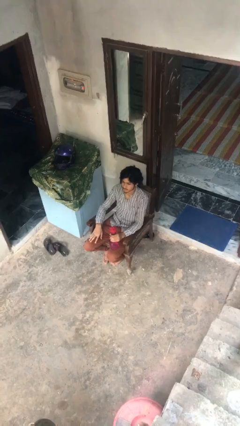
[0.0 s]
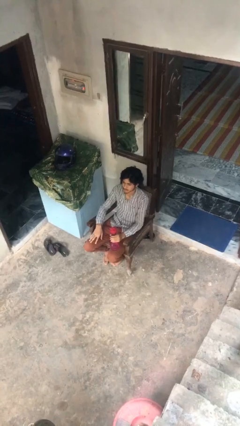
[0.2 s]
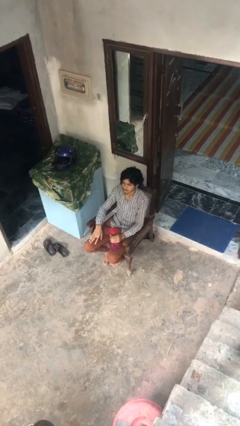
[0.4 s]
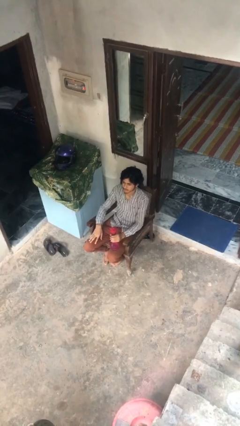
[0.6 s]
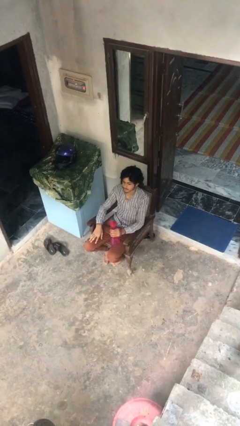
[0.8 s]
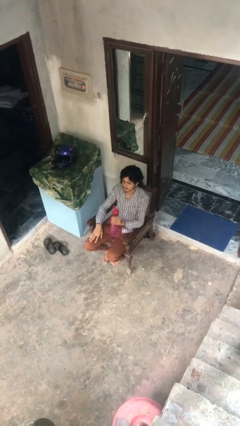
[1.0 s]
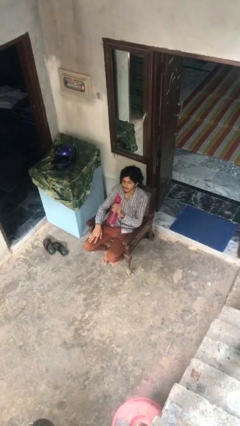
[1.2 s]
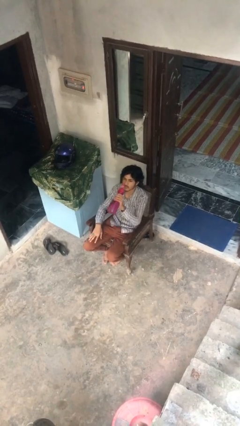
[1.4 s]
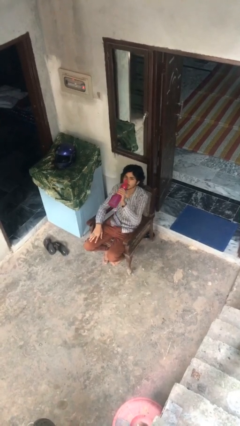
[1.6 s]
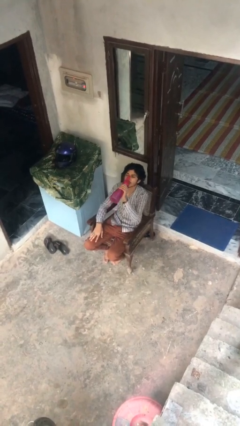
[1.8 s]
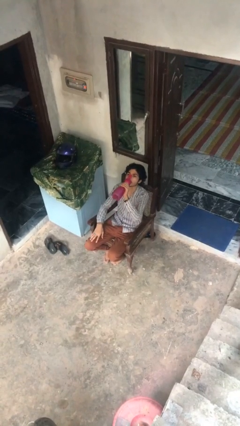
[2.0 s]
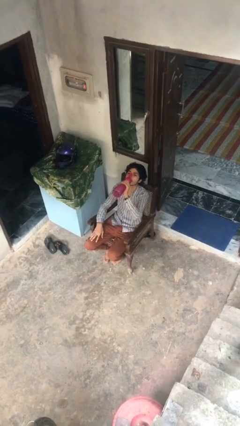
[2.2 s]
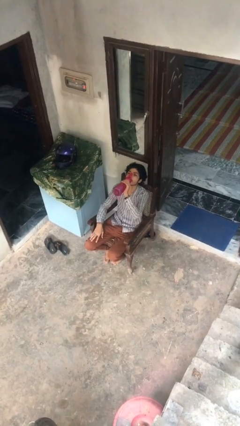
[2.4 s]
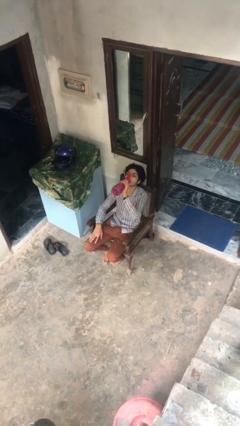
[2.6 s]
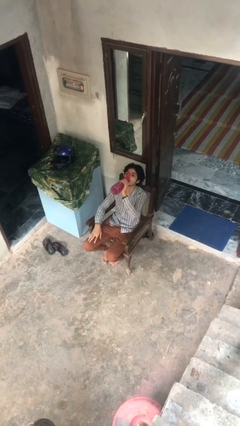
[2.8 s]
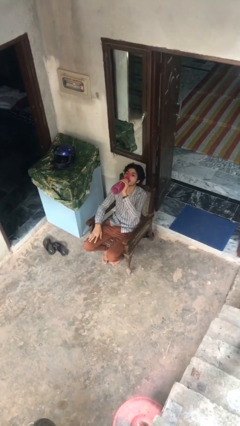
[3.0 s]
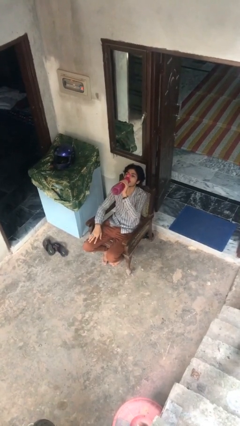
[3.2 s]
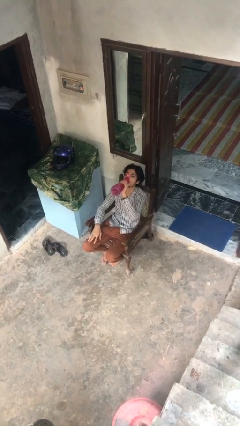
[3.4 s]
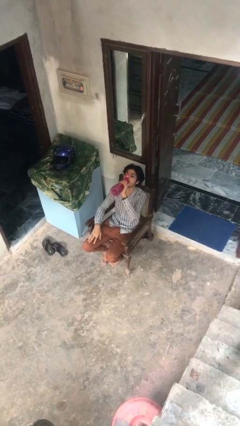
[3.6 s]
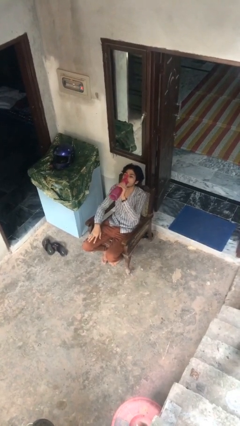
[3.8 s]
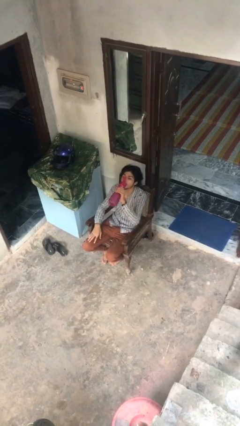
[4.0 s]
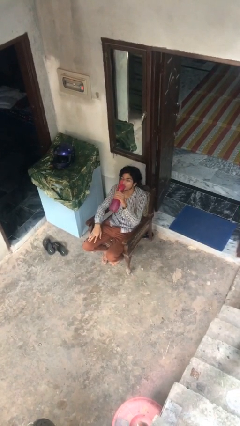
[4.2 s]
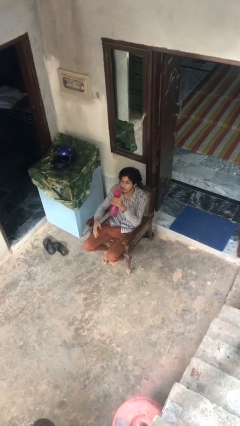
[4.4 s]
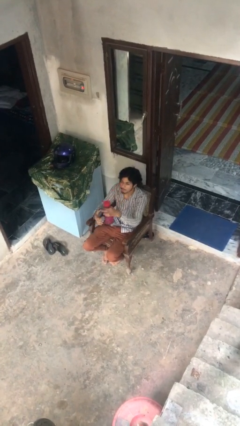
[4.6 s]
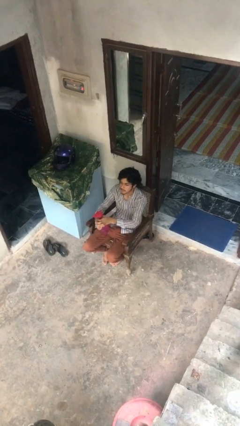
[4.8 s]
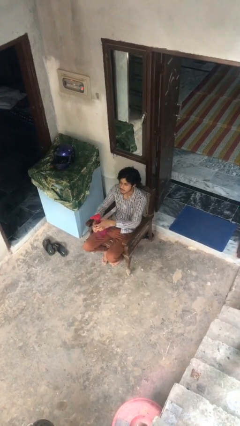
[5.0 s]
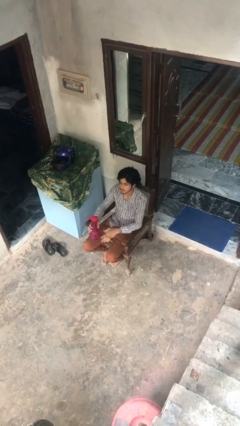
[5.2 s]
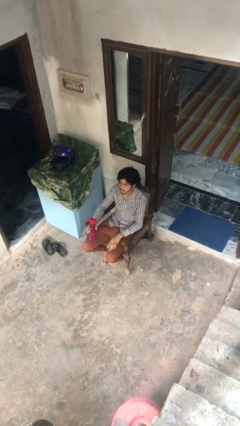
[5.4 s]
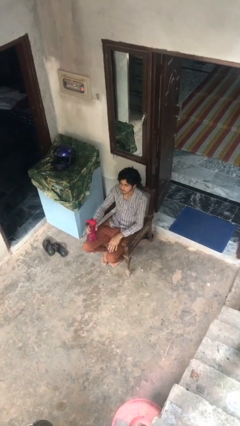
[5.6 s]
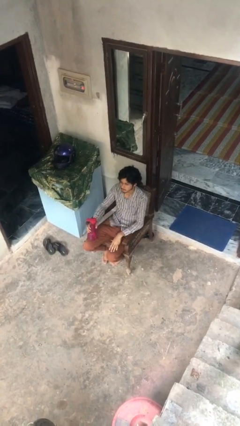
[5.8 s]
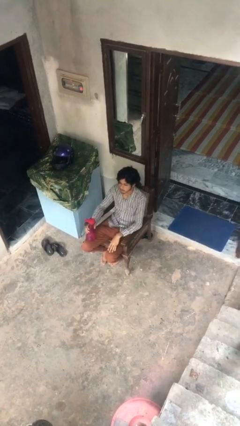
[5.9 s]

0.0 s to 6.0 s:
person drinks from bottle

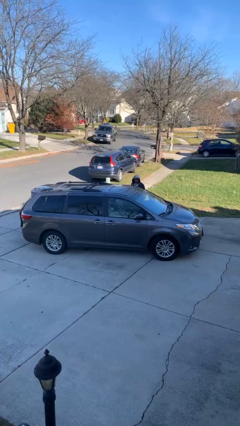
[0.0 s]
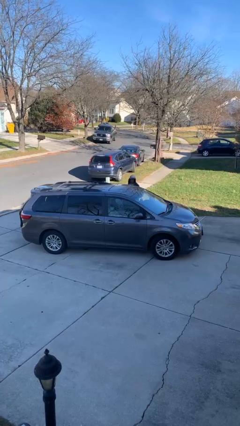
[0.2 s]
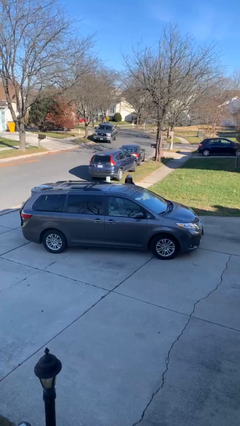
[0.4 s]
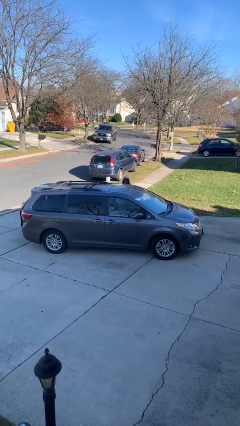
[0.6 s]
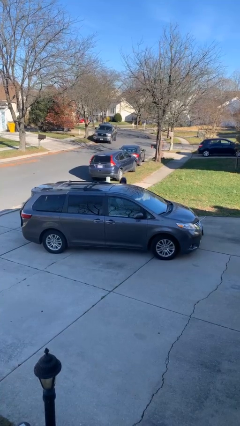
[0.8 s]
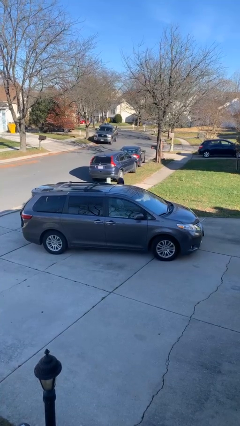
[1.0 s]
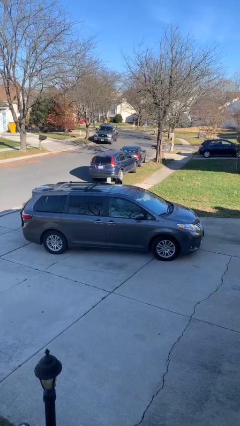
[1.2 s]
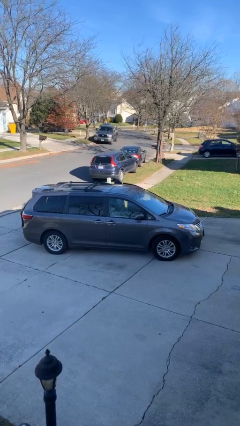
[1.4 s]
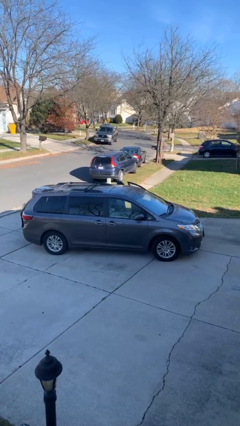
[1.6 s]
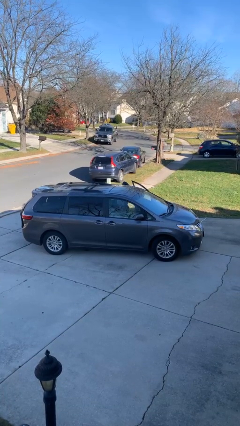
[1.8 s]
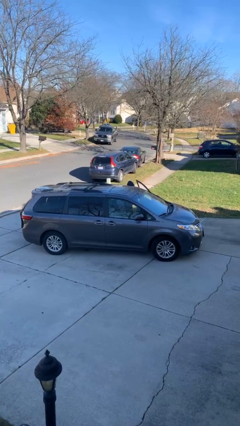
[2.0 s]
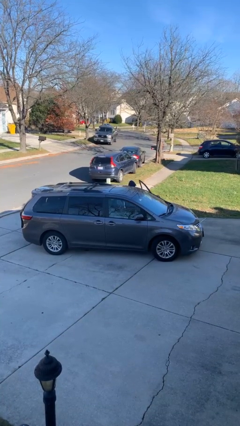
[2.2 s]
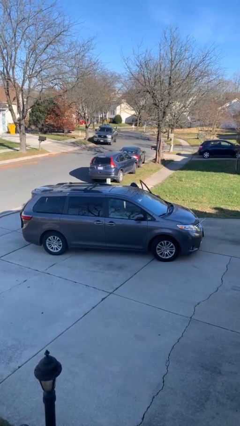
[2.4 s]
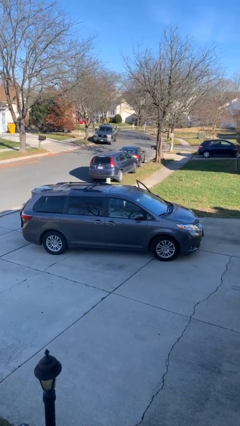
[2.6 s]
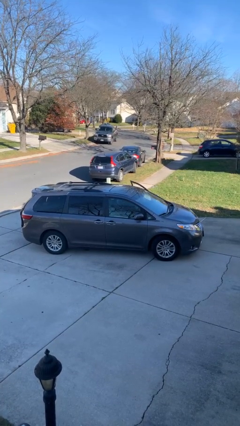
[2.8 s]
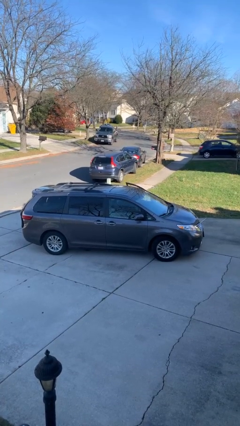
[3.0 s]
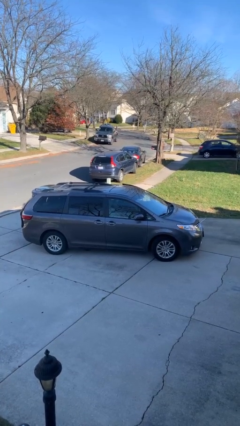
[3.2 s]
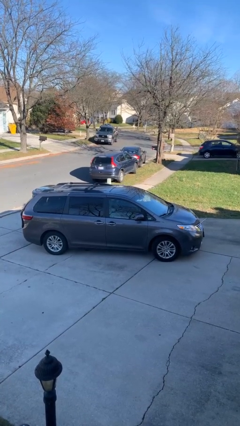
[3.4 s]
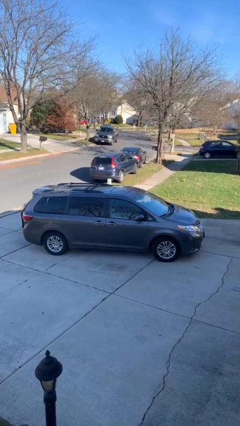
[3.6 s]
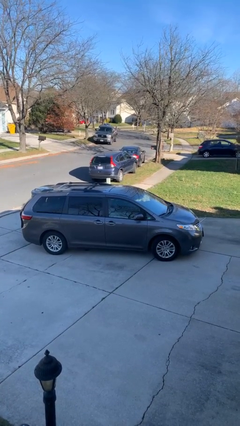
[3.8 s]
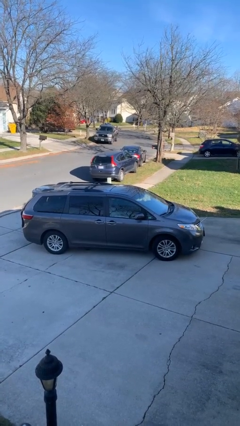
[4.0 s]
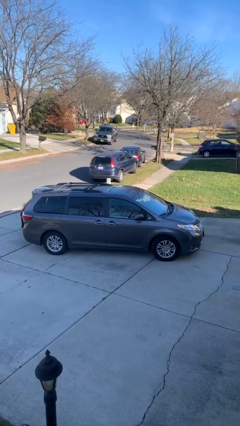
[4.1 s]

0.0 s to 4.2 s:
car picks up person

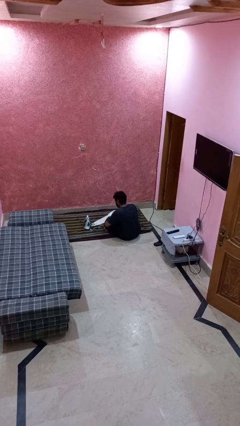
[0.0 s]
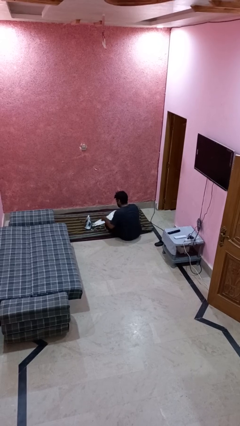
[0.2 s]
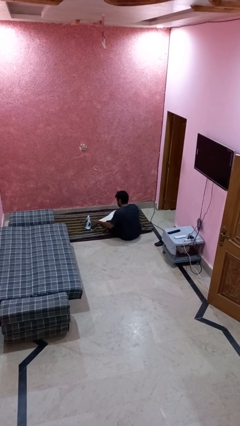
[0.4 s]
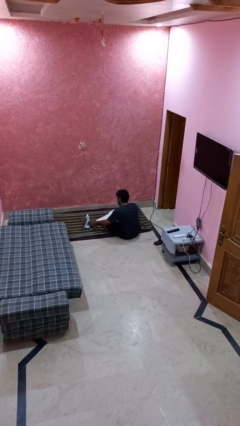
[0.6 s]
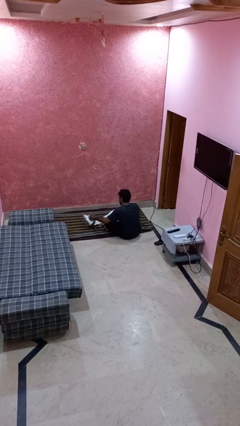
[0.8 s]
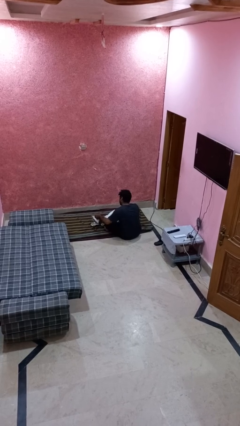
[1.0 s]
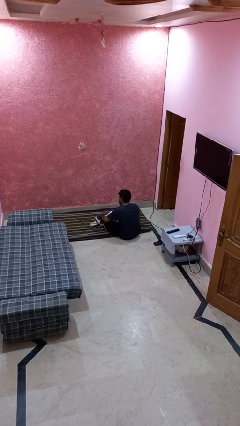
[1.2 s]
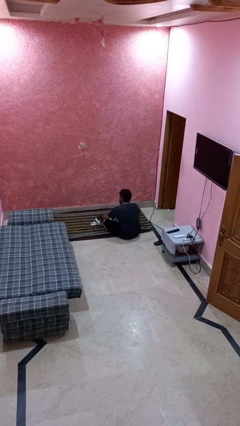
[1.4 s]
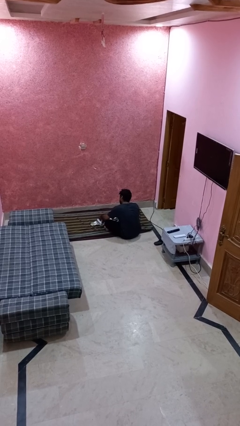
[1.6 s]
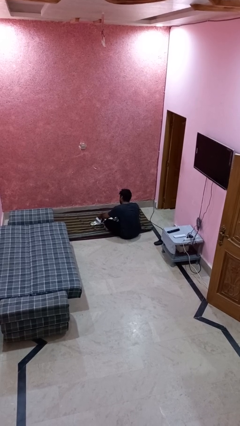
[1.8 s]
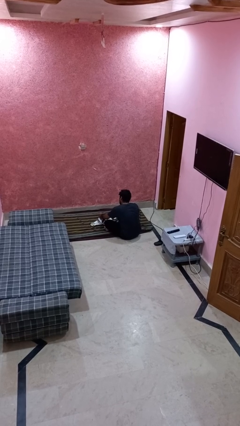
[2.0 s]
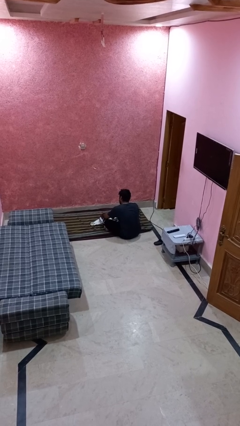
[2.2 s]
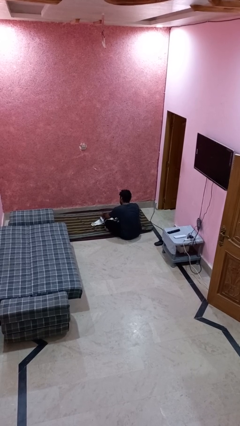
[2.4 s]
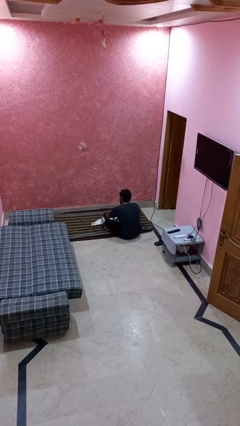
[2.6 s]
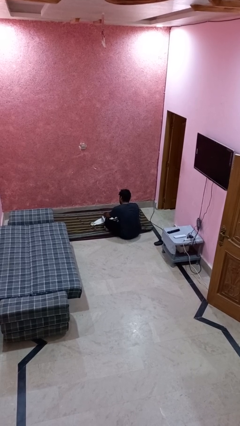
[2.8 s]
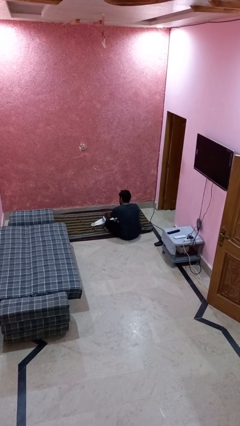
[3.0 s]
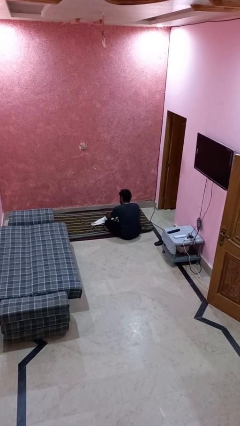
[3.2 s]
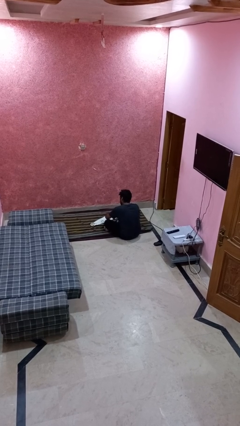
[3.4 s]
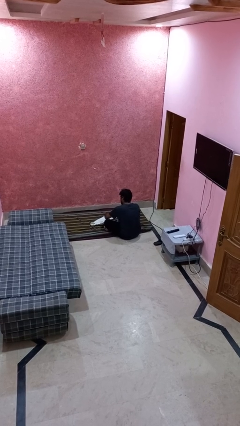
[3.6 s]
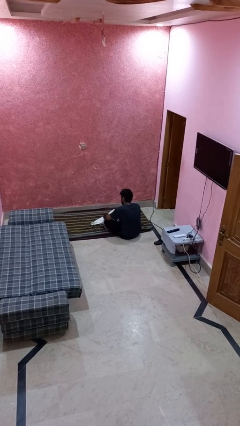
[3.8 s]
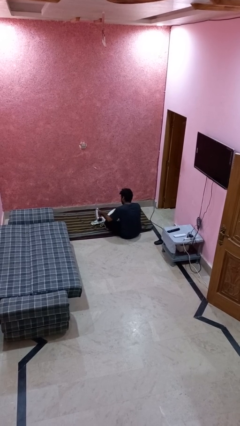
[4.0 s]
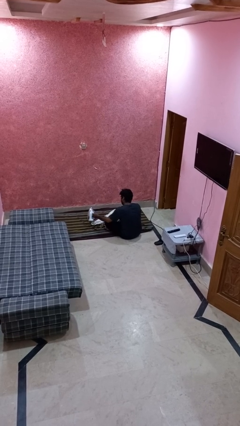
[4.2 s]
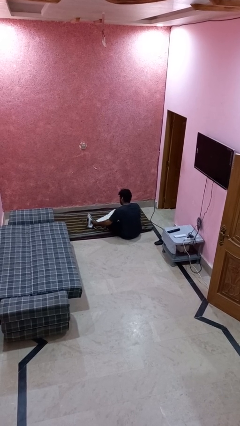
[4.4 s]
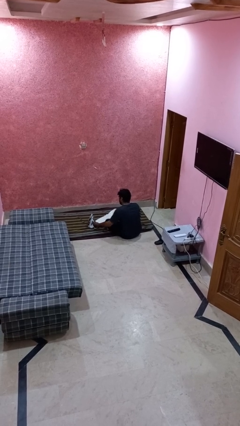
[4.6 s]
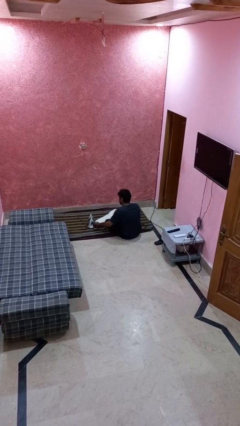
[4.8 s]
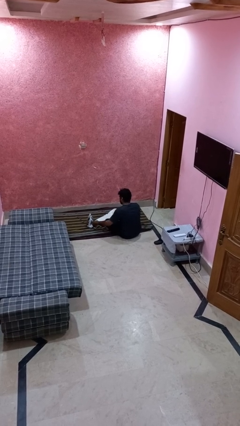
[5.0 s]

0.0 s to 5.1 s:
person irons clothes

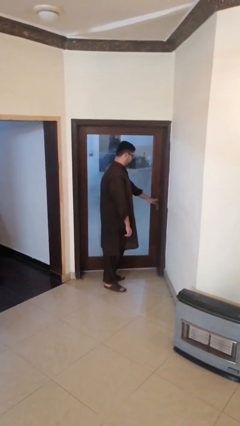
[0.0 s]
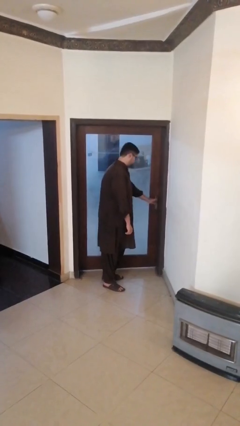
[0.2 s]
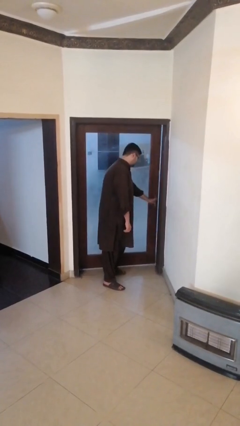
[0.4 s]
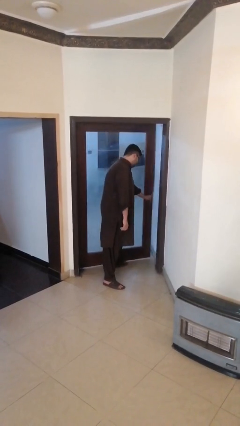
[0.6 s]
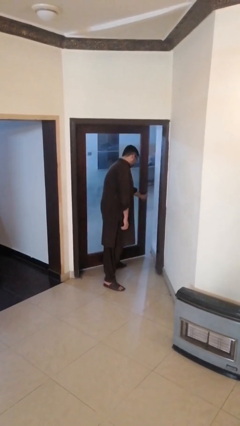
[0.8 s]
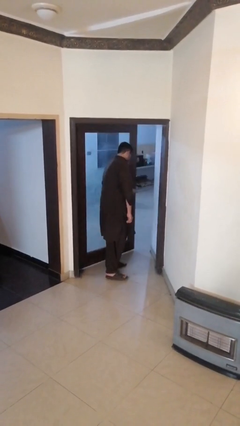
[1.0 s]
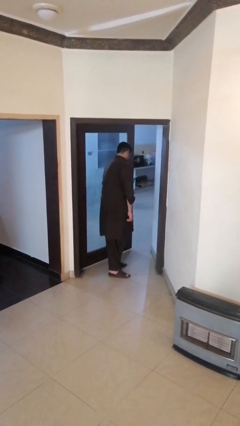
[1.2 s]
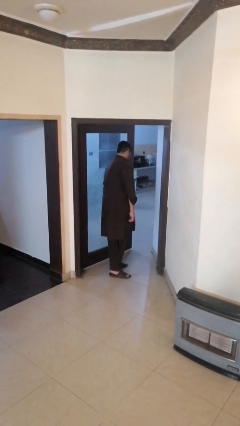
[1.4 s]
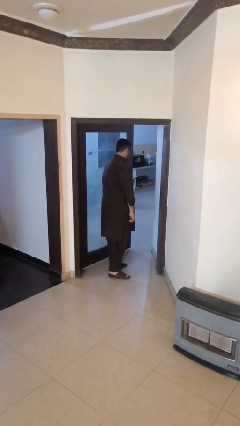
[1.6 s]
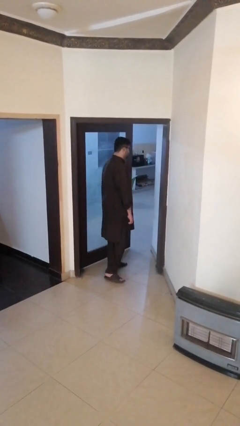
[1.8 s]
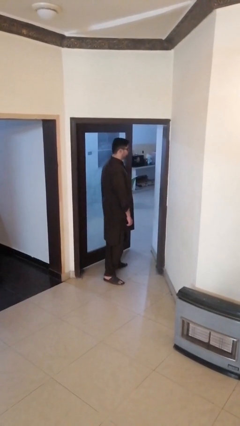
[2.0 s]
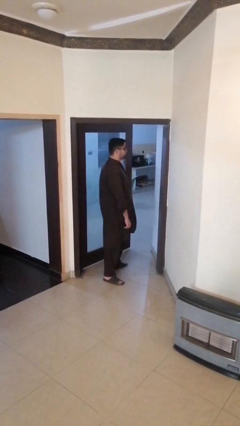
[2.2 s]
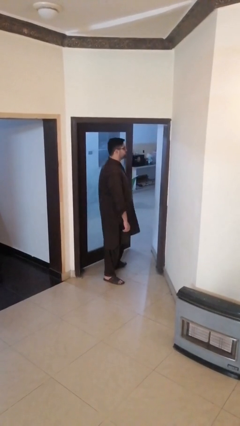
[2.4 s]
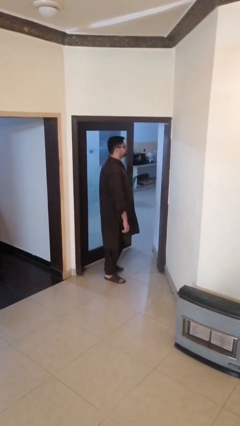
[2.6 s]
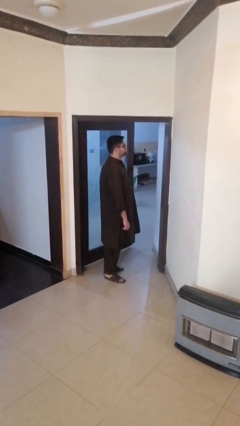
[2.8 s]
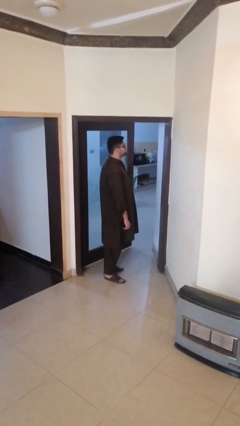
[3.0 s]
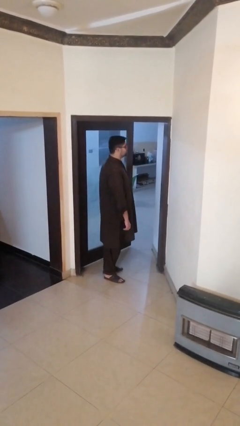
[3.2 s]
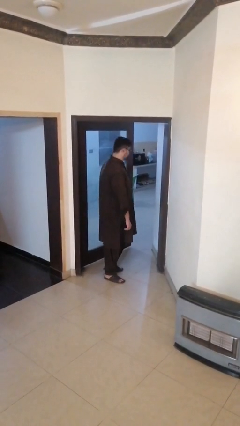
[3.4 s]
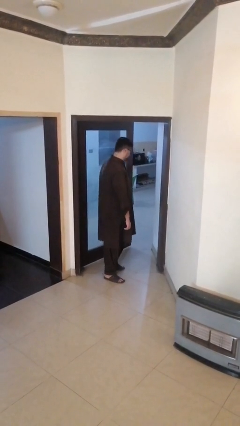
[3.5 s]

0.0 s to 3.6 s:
person opens facility door
